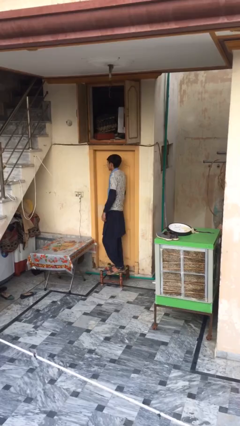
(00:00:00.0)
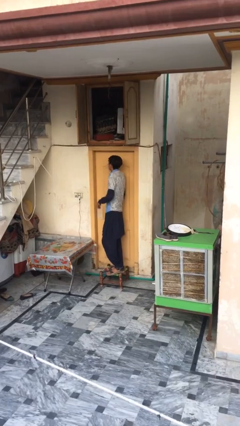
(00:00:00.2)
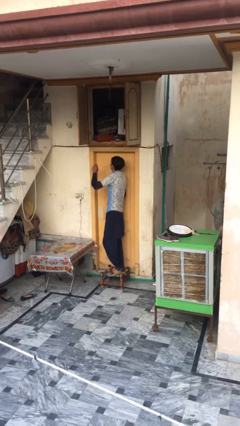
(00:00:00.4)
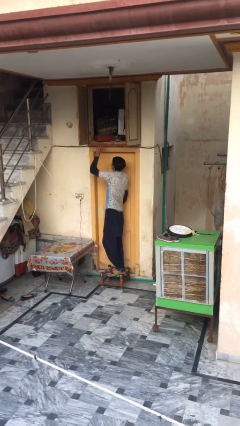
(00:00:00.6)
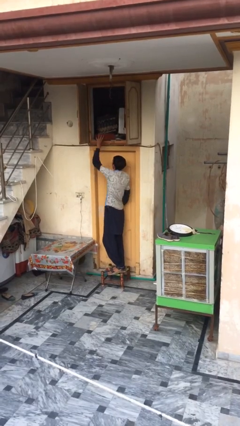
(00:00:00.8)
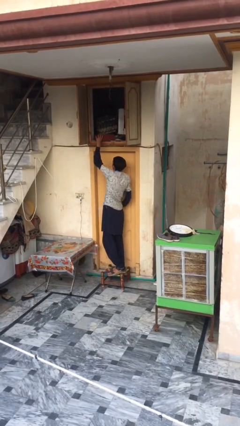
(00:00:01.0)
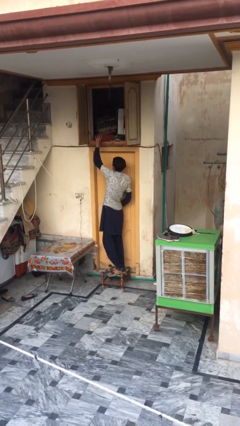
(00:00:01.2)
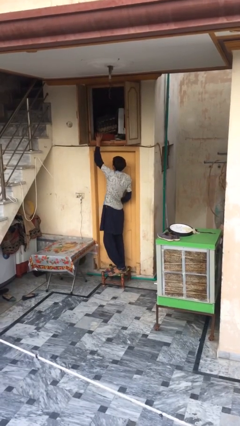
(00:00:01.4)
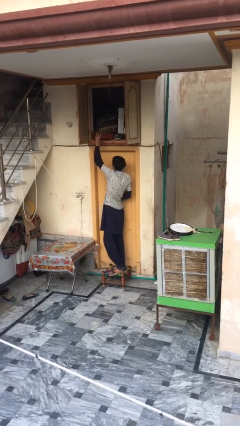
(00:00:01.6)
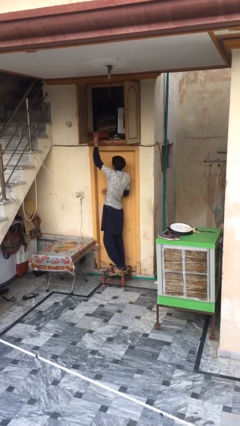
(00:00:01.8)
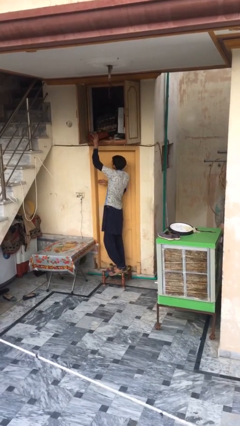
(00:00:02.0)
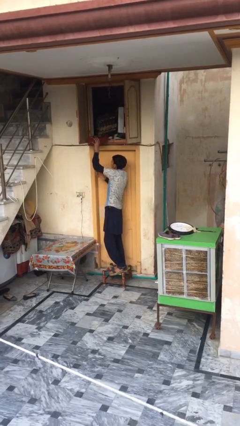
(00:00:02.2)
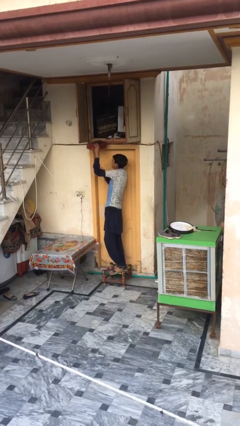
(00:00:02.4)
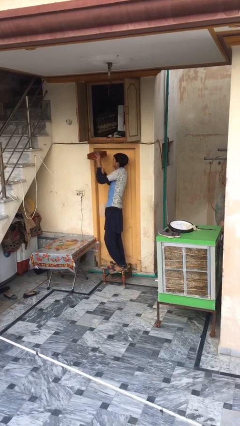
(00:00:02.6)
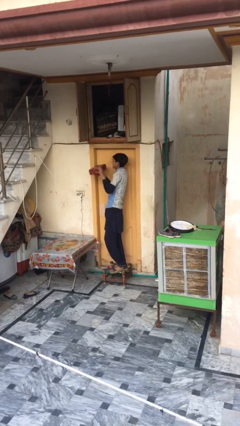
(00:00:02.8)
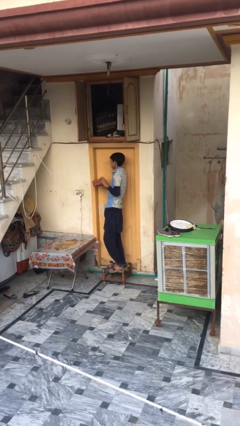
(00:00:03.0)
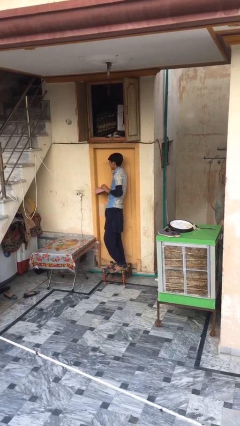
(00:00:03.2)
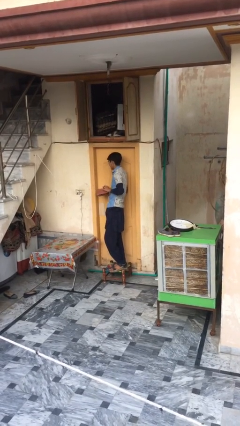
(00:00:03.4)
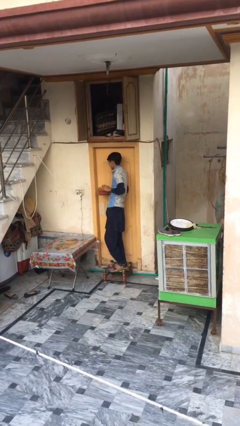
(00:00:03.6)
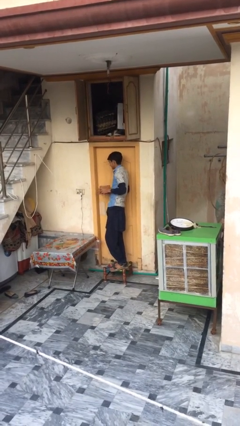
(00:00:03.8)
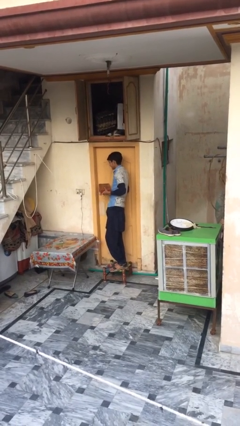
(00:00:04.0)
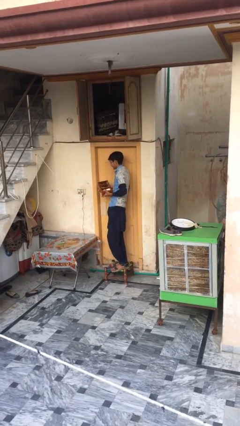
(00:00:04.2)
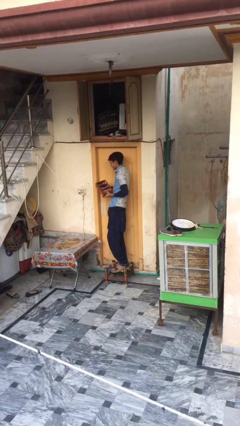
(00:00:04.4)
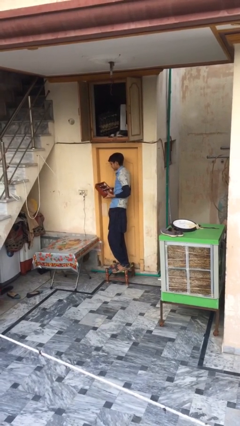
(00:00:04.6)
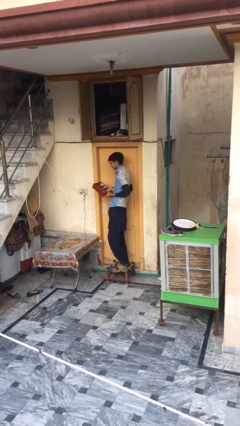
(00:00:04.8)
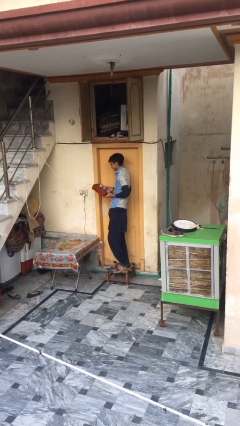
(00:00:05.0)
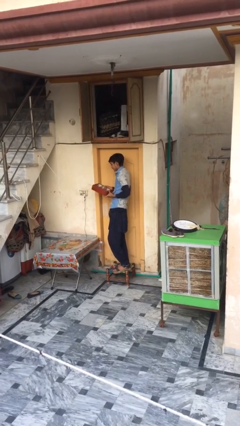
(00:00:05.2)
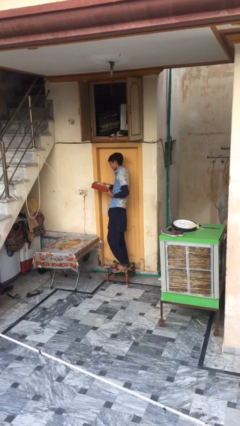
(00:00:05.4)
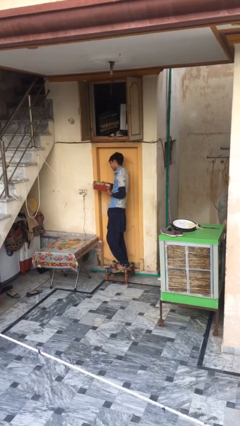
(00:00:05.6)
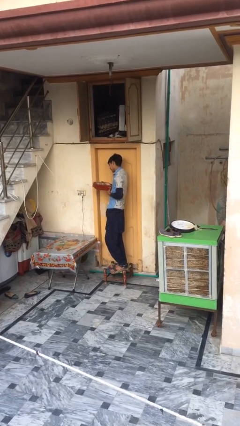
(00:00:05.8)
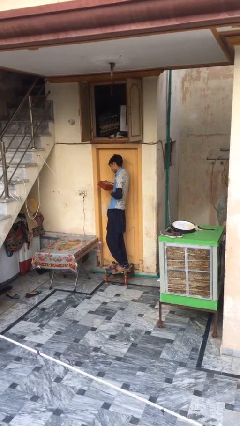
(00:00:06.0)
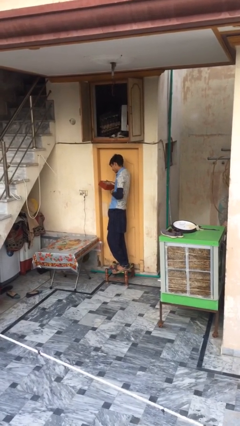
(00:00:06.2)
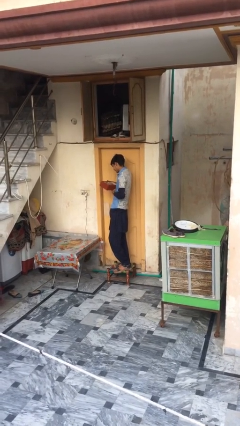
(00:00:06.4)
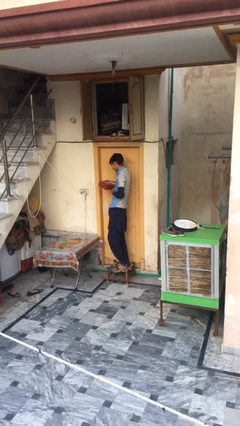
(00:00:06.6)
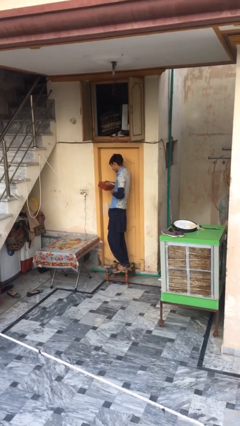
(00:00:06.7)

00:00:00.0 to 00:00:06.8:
person picks up object from shelf

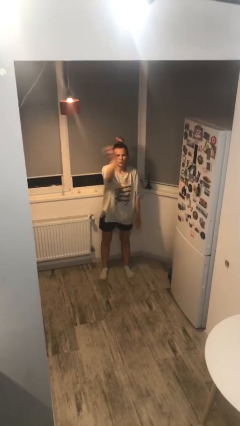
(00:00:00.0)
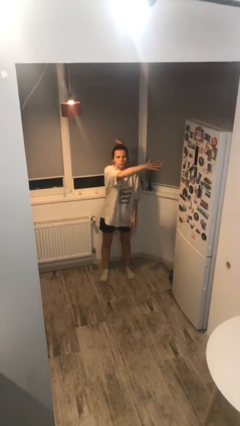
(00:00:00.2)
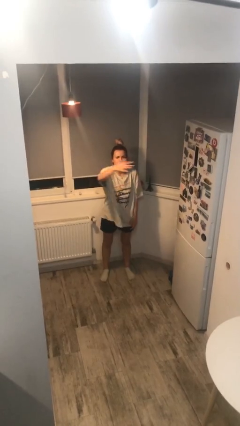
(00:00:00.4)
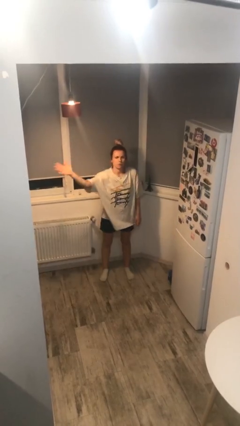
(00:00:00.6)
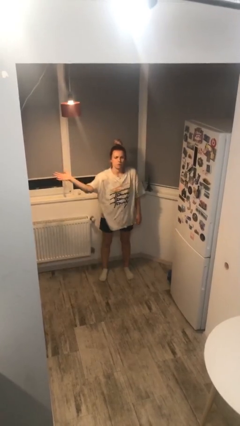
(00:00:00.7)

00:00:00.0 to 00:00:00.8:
person punches

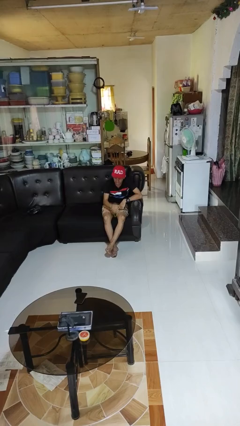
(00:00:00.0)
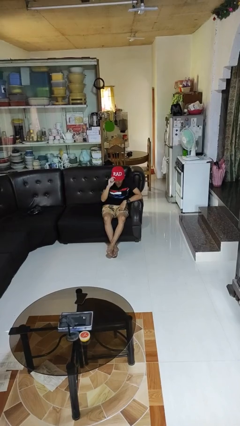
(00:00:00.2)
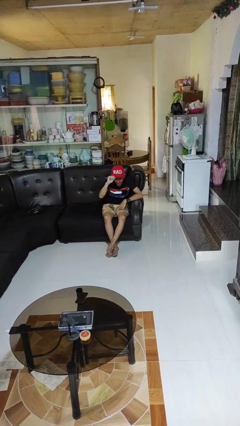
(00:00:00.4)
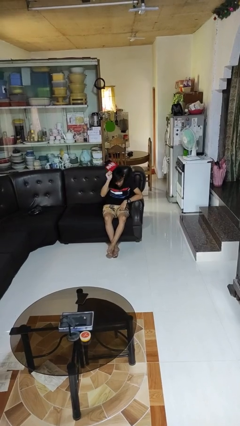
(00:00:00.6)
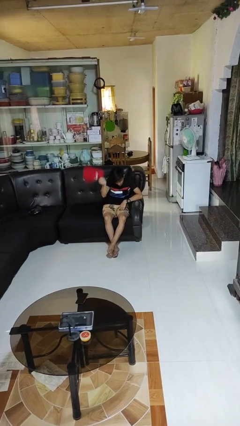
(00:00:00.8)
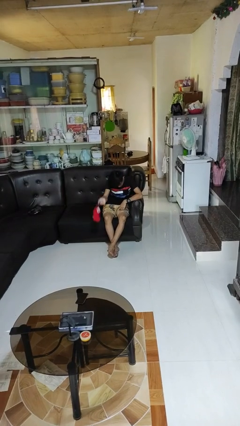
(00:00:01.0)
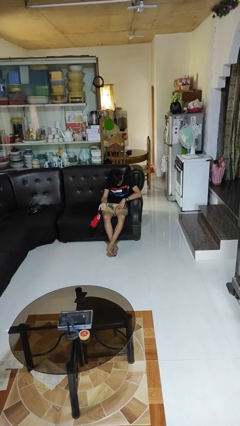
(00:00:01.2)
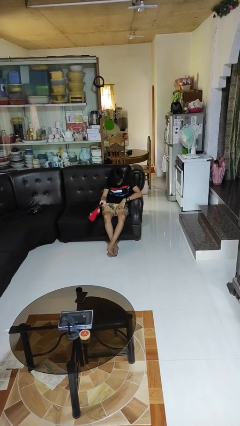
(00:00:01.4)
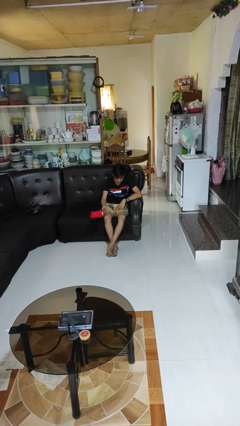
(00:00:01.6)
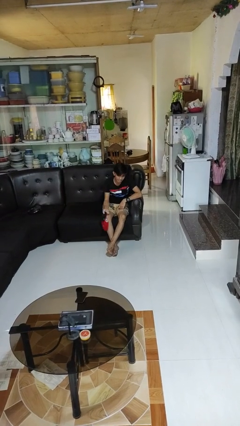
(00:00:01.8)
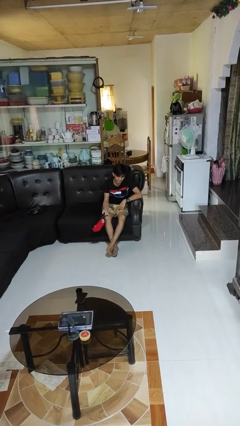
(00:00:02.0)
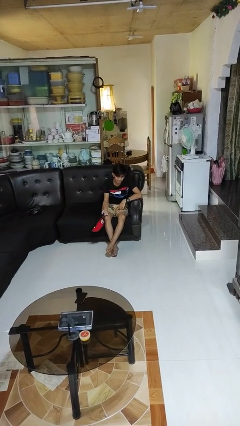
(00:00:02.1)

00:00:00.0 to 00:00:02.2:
person takes off hat

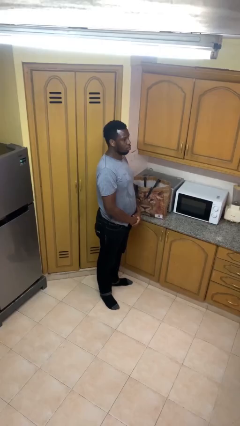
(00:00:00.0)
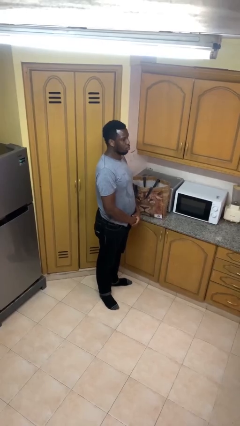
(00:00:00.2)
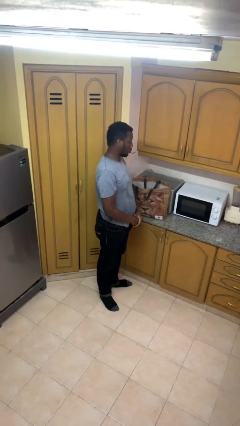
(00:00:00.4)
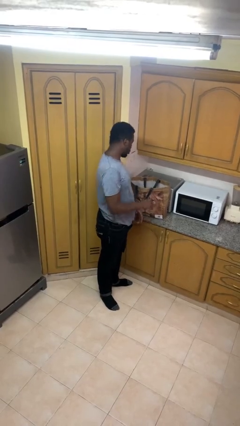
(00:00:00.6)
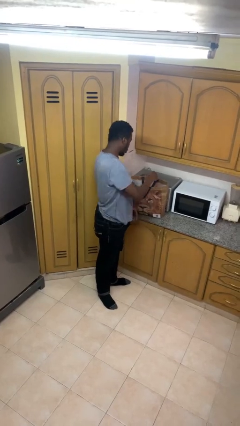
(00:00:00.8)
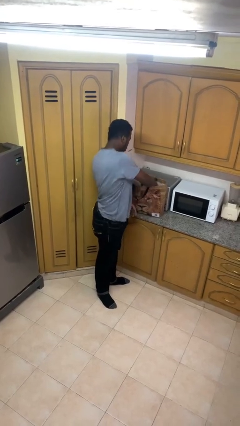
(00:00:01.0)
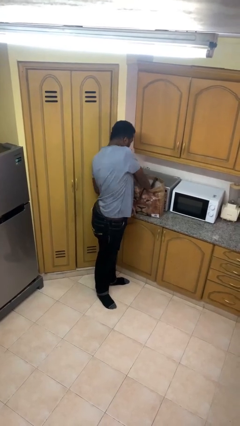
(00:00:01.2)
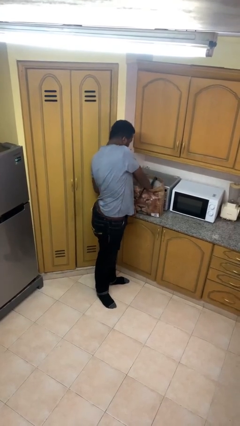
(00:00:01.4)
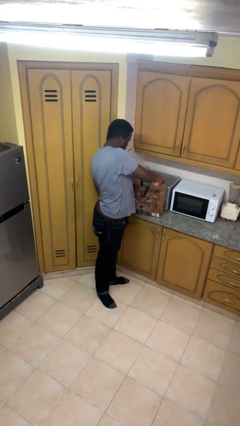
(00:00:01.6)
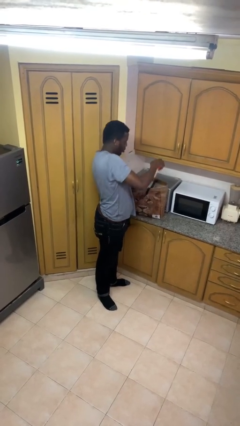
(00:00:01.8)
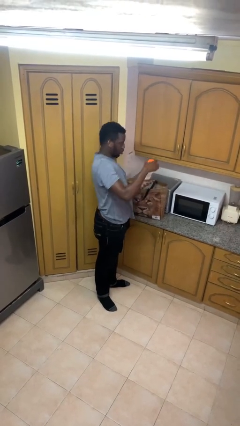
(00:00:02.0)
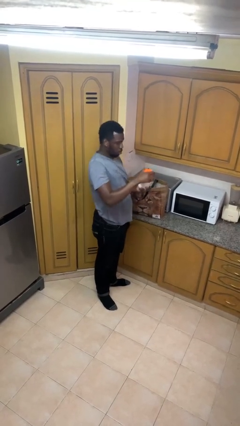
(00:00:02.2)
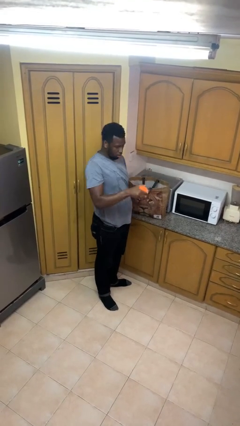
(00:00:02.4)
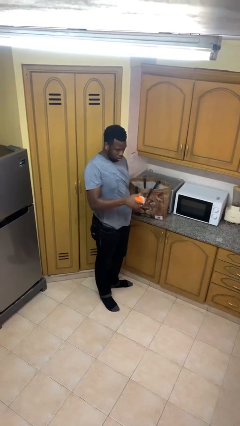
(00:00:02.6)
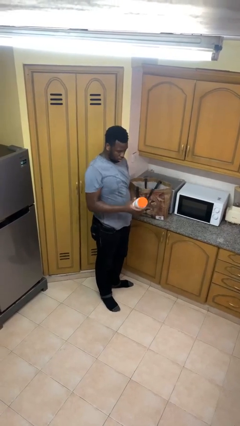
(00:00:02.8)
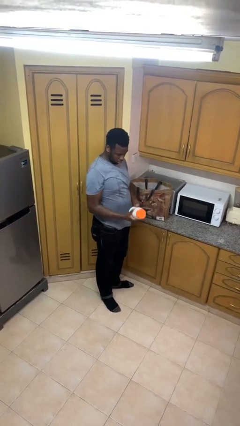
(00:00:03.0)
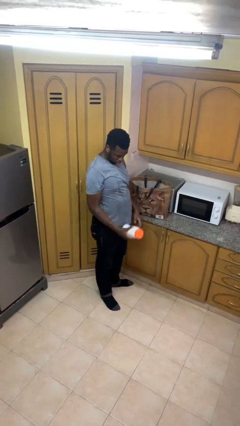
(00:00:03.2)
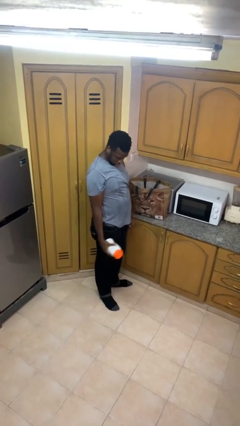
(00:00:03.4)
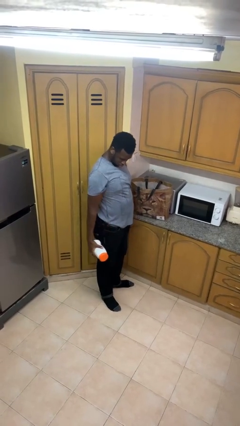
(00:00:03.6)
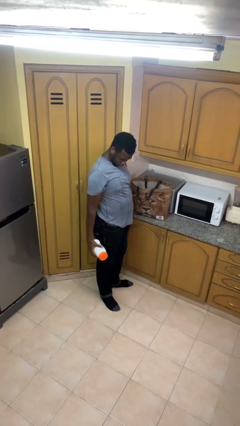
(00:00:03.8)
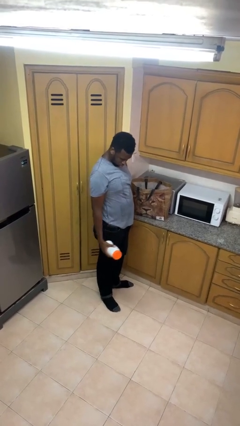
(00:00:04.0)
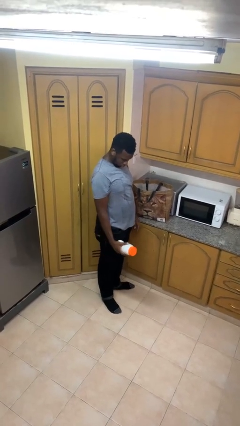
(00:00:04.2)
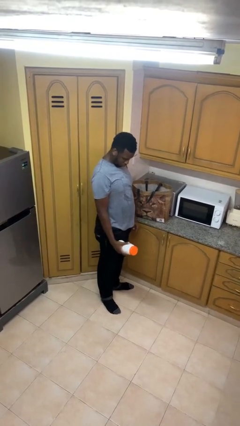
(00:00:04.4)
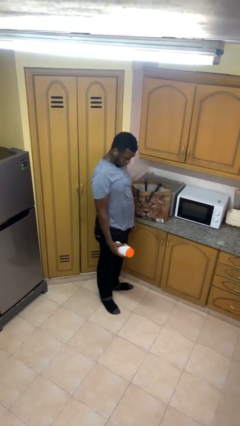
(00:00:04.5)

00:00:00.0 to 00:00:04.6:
person takes object from bag

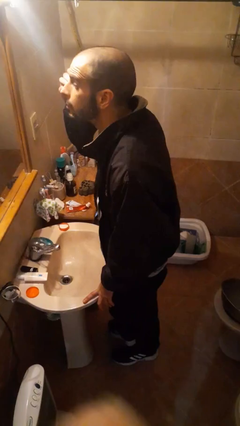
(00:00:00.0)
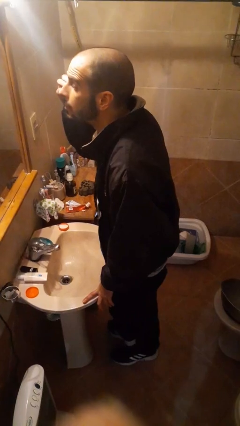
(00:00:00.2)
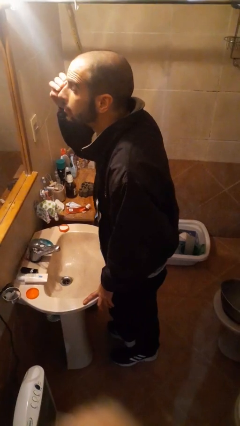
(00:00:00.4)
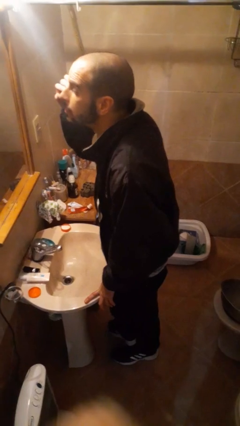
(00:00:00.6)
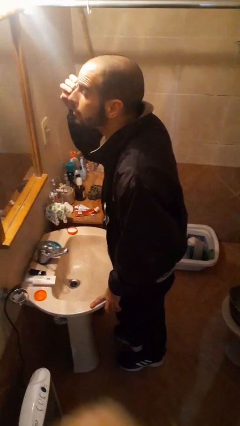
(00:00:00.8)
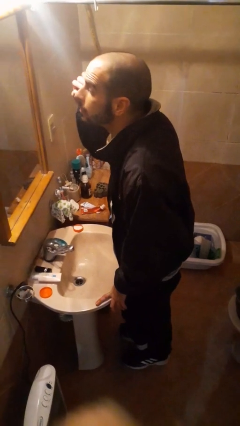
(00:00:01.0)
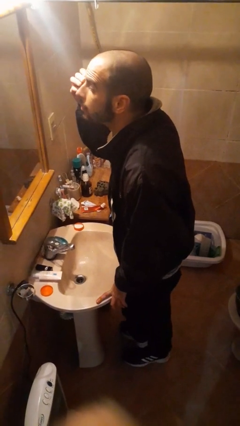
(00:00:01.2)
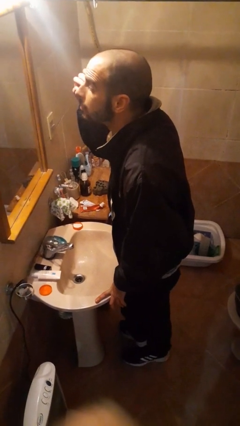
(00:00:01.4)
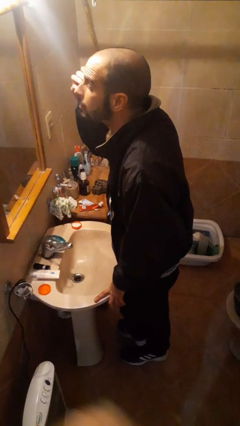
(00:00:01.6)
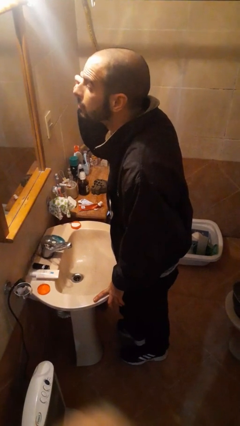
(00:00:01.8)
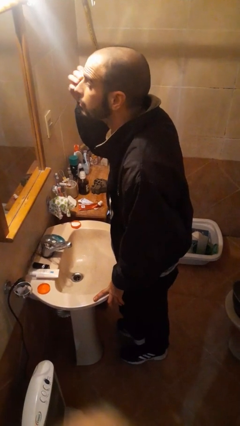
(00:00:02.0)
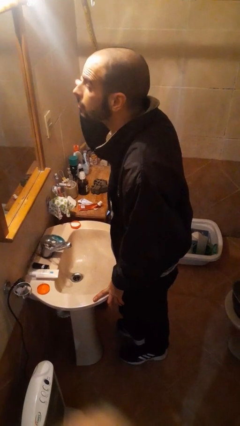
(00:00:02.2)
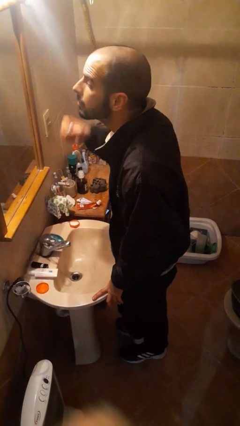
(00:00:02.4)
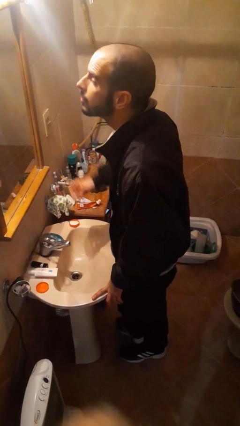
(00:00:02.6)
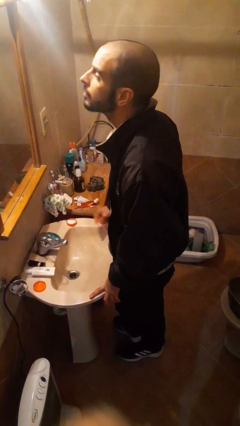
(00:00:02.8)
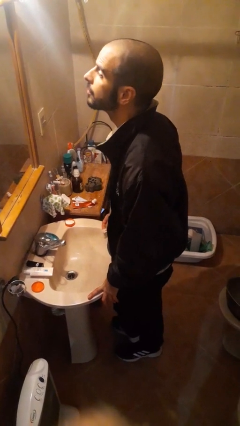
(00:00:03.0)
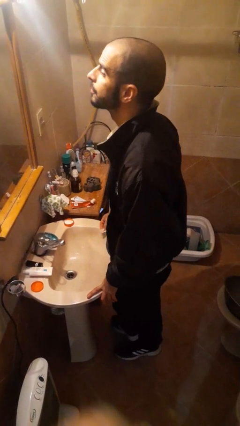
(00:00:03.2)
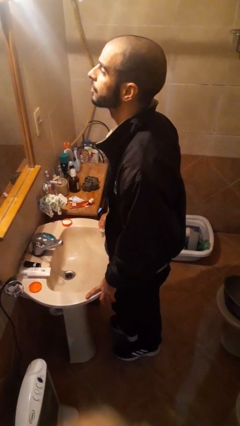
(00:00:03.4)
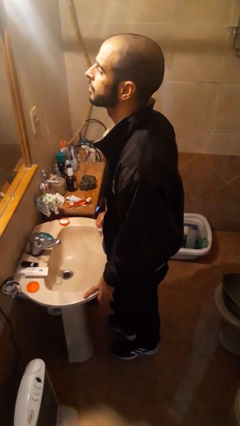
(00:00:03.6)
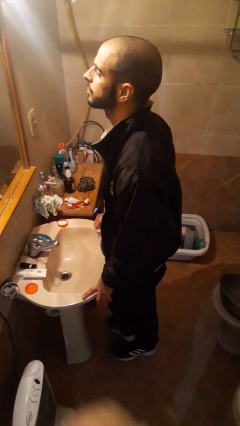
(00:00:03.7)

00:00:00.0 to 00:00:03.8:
person applies eye makeup
